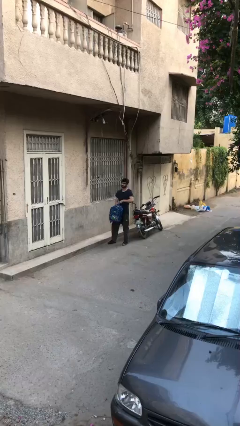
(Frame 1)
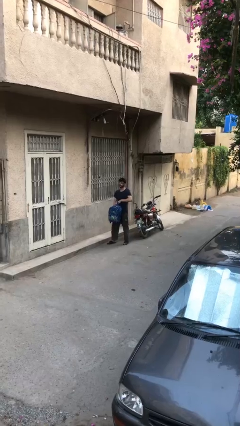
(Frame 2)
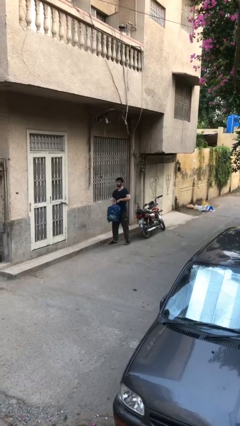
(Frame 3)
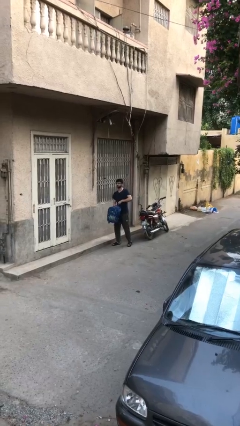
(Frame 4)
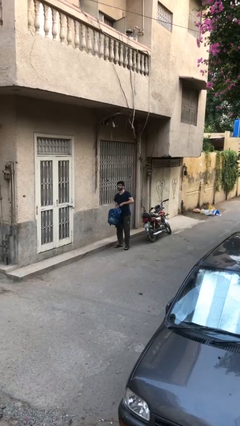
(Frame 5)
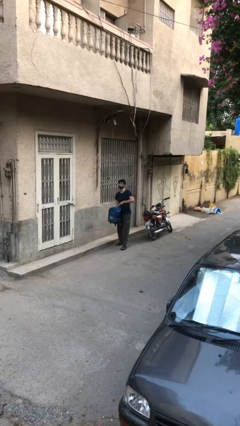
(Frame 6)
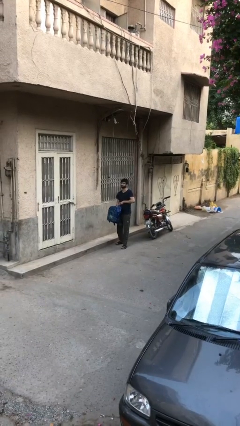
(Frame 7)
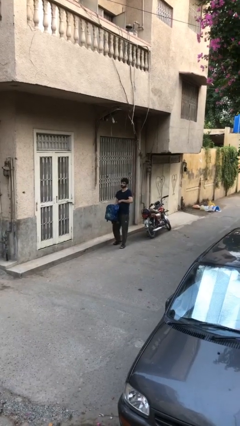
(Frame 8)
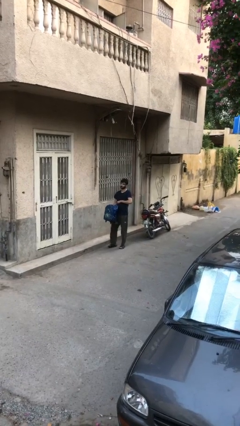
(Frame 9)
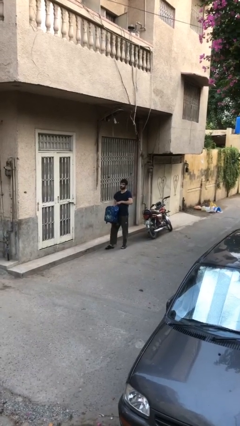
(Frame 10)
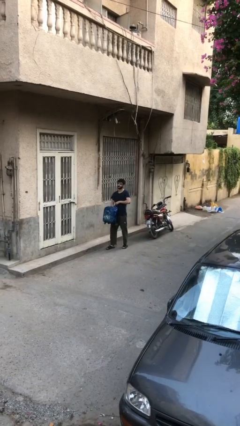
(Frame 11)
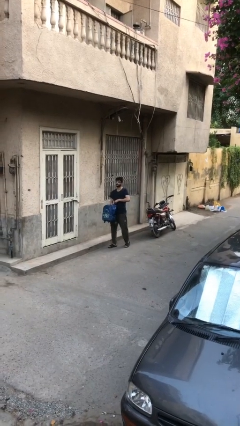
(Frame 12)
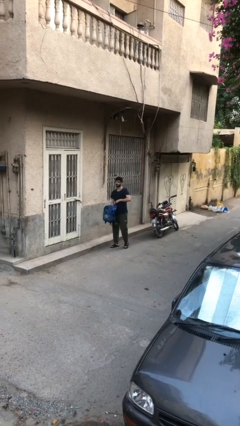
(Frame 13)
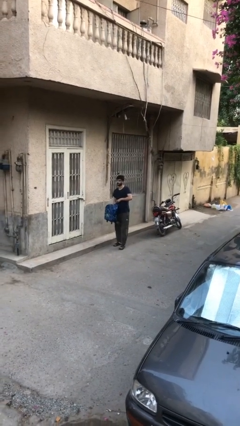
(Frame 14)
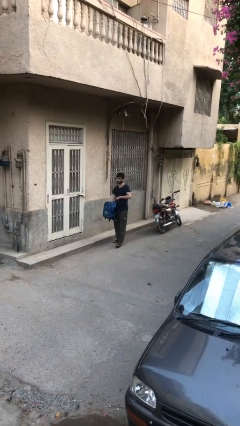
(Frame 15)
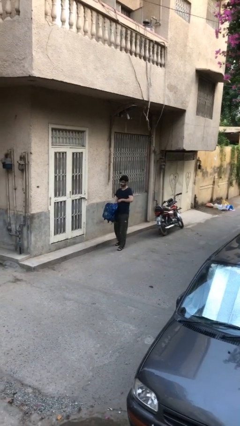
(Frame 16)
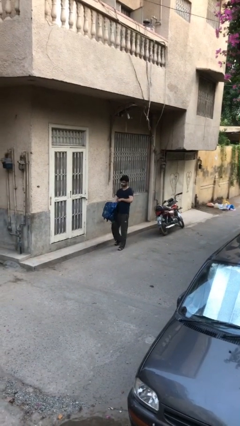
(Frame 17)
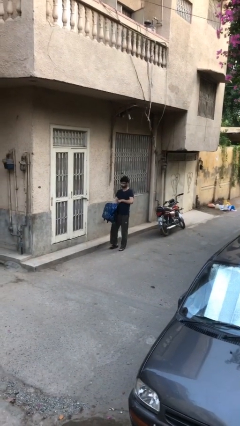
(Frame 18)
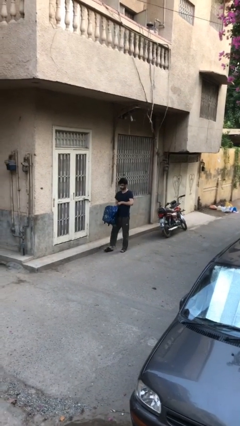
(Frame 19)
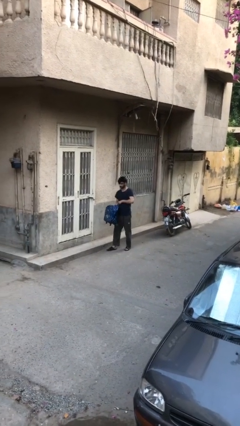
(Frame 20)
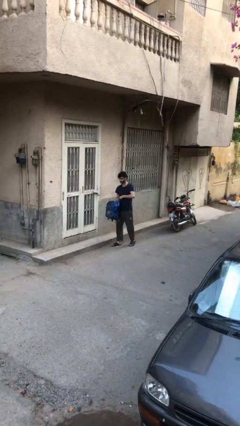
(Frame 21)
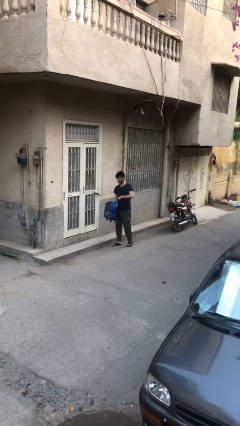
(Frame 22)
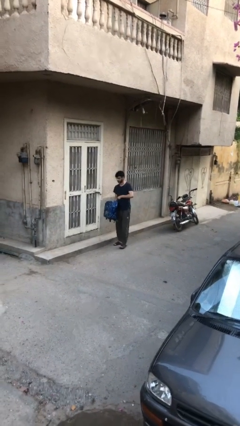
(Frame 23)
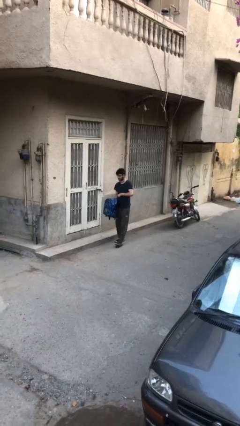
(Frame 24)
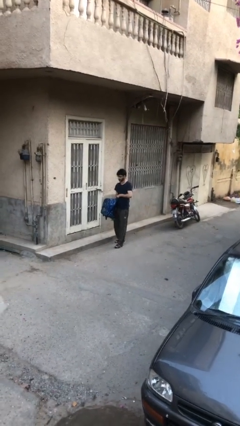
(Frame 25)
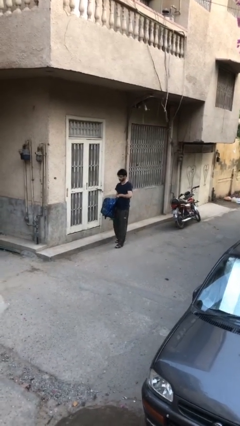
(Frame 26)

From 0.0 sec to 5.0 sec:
person carries heavy object

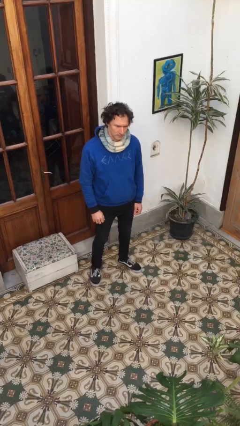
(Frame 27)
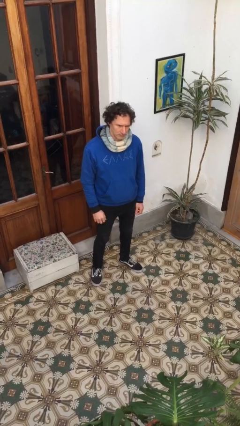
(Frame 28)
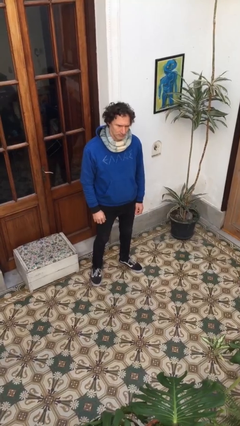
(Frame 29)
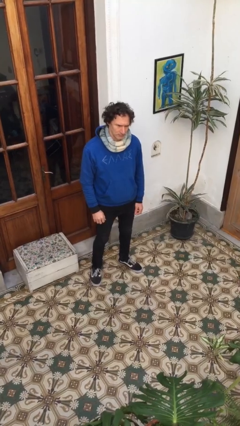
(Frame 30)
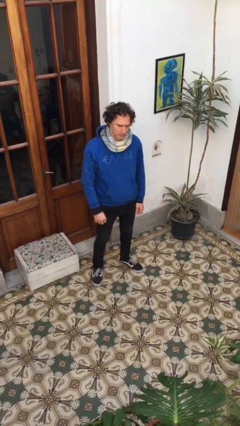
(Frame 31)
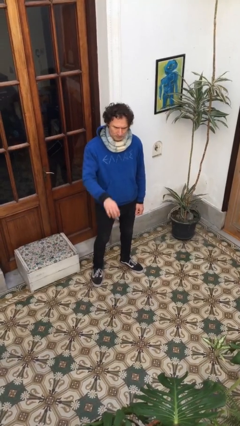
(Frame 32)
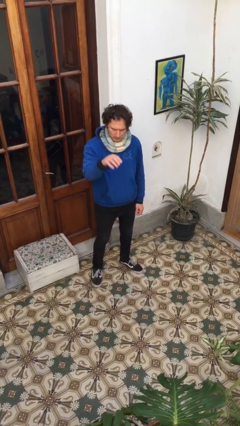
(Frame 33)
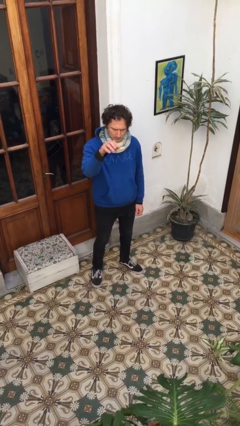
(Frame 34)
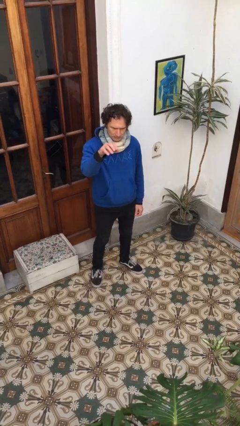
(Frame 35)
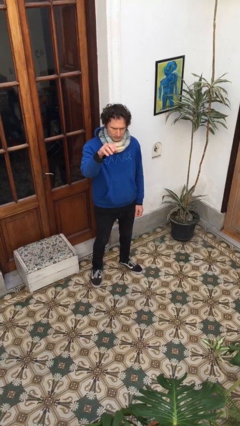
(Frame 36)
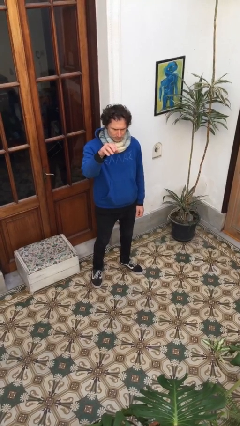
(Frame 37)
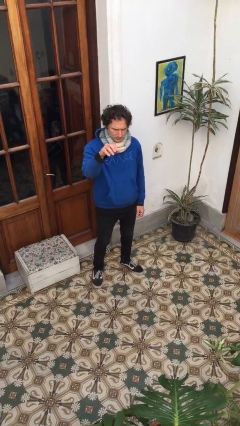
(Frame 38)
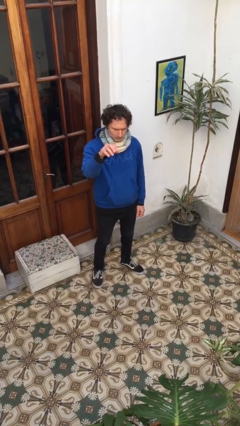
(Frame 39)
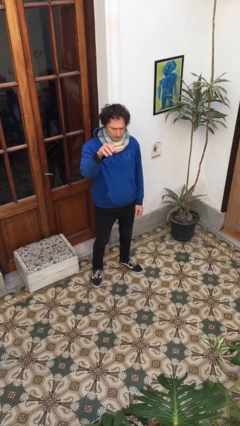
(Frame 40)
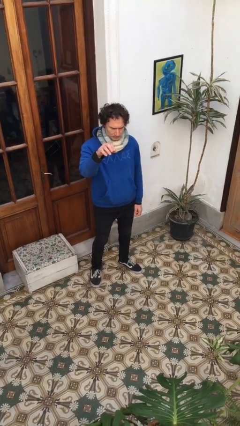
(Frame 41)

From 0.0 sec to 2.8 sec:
person gestures swipe up

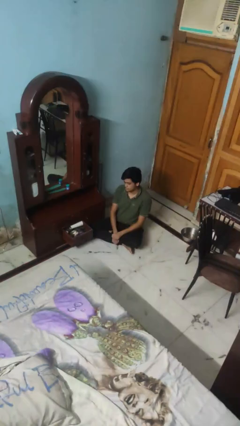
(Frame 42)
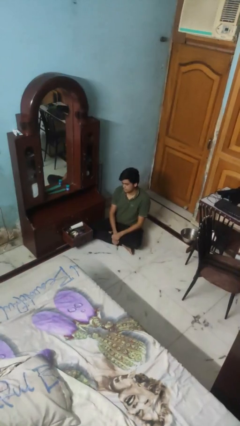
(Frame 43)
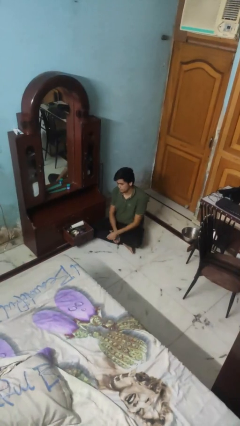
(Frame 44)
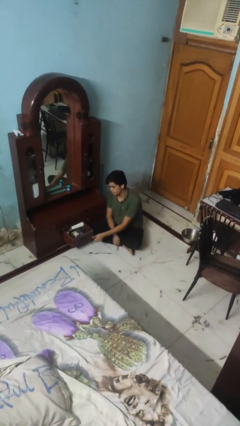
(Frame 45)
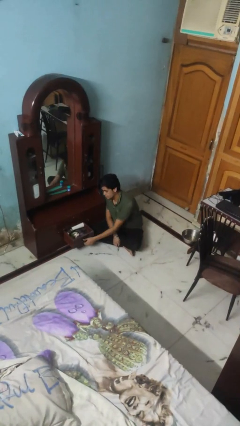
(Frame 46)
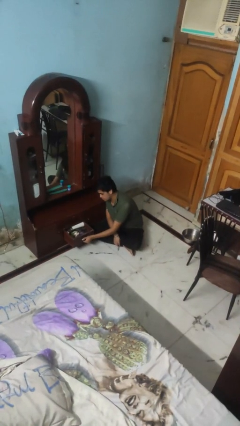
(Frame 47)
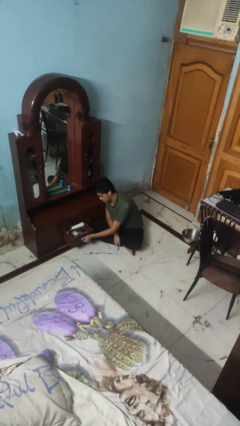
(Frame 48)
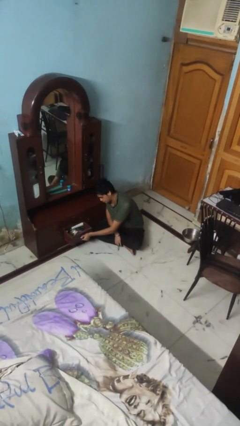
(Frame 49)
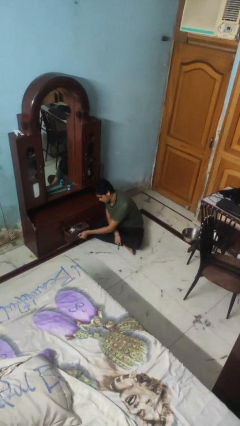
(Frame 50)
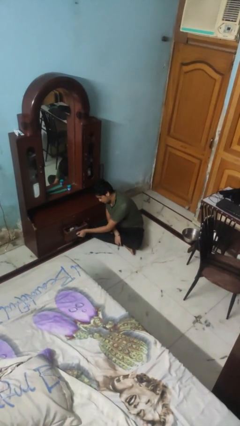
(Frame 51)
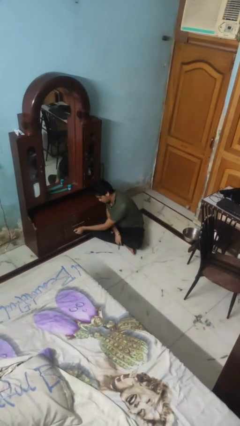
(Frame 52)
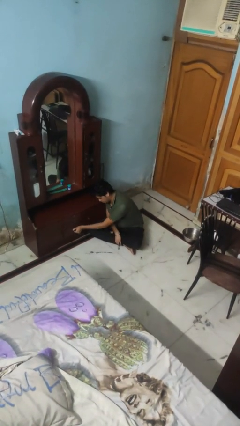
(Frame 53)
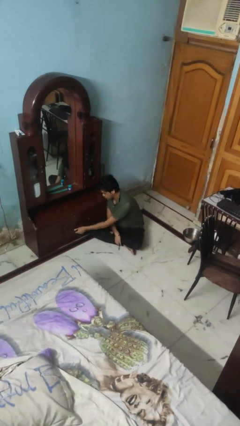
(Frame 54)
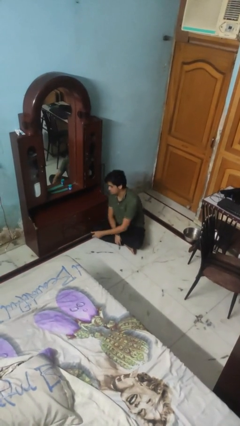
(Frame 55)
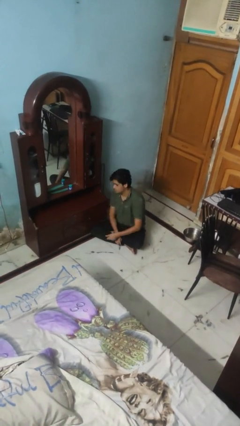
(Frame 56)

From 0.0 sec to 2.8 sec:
person closes dresser drawer

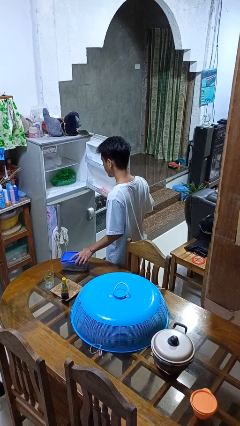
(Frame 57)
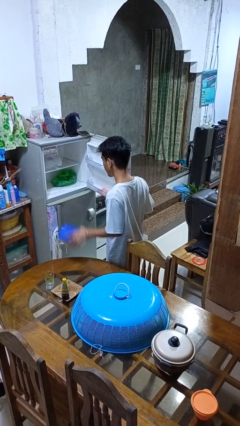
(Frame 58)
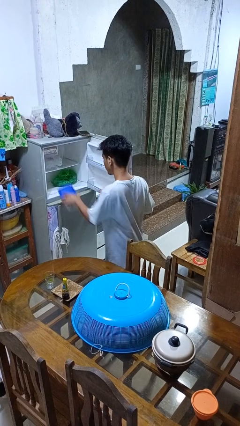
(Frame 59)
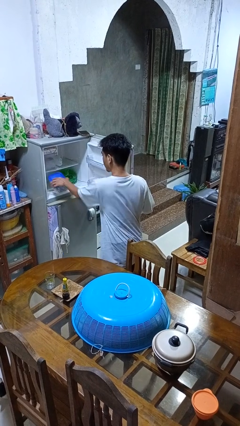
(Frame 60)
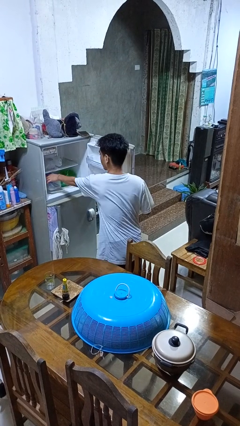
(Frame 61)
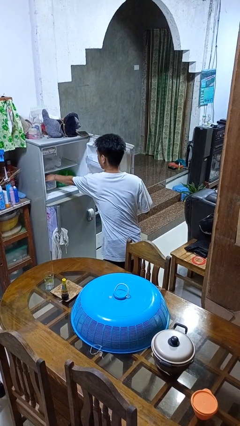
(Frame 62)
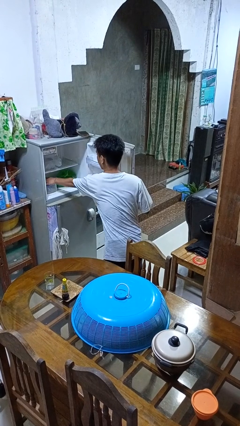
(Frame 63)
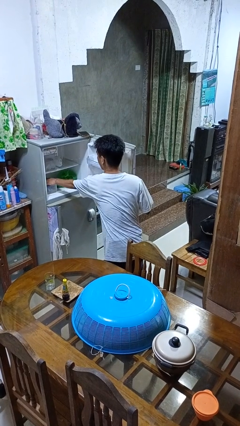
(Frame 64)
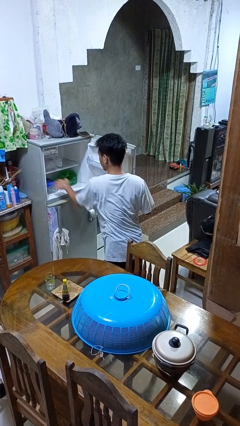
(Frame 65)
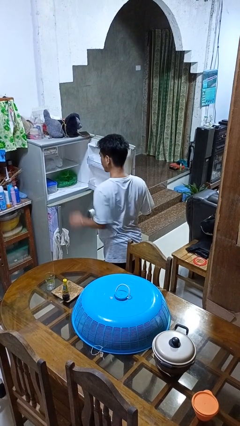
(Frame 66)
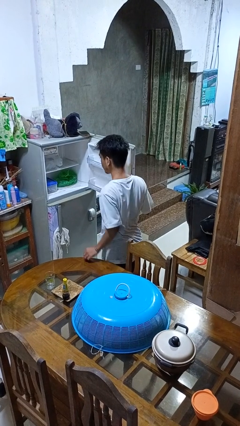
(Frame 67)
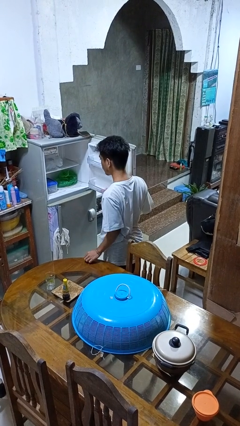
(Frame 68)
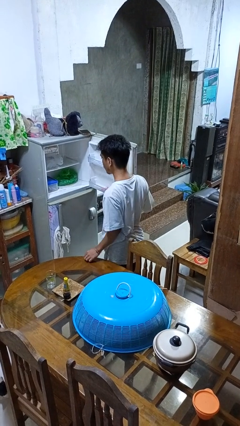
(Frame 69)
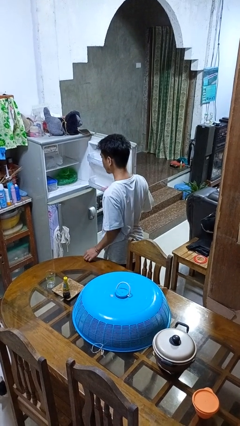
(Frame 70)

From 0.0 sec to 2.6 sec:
person puts object into refrigerator

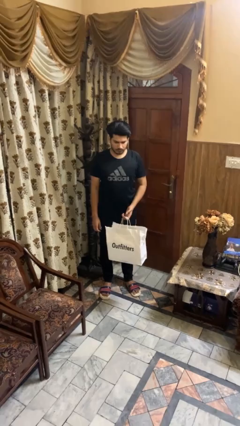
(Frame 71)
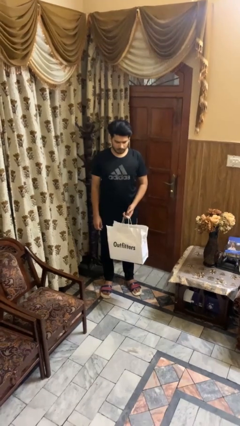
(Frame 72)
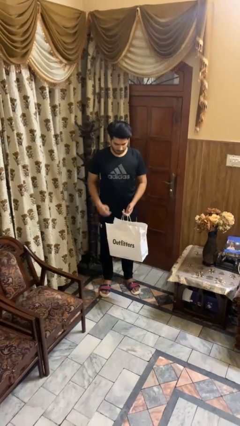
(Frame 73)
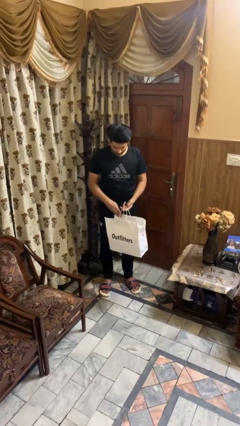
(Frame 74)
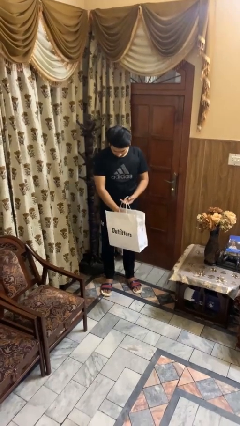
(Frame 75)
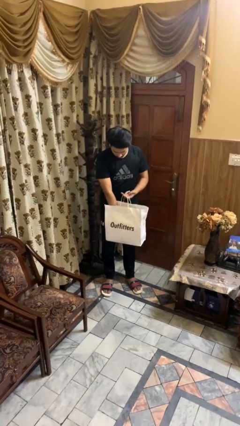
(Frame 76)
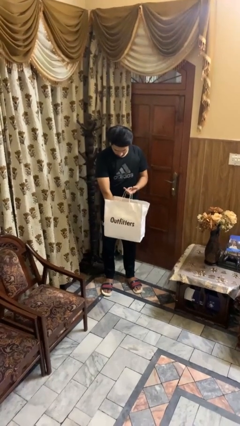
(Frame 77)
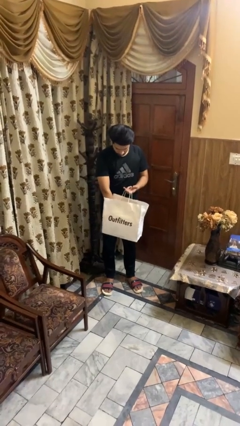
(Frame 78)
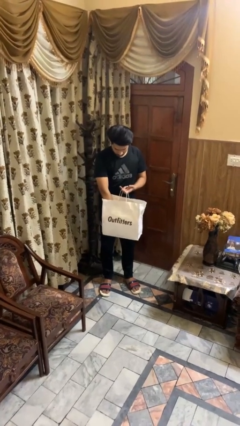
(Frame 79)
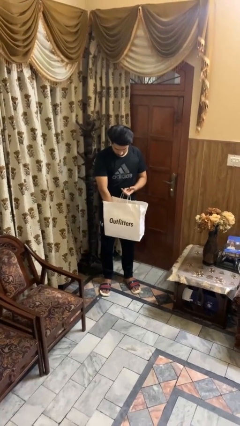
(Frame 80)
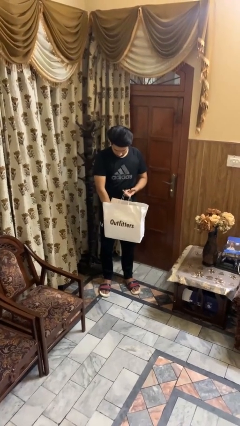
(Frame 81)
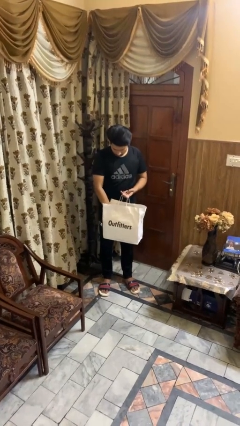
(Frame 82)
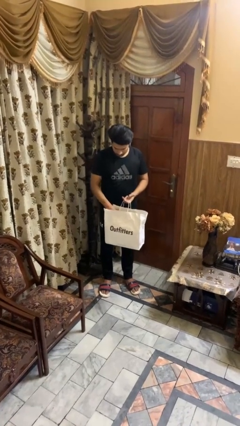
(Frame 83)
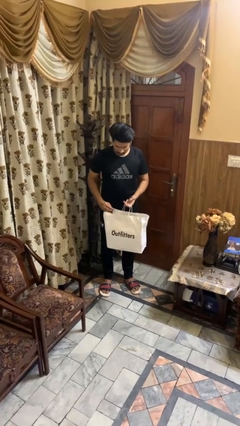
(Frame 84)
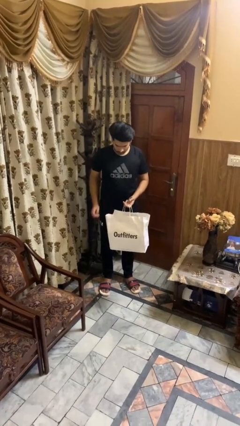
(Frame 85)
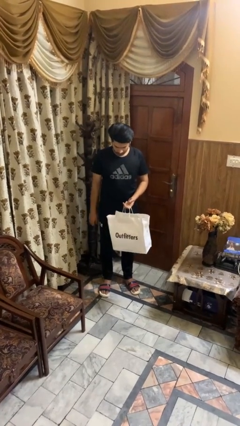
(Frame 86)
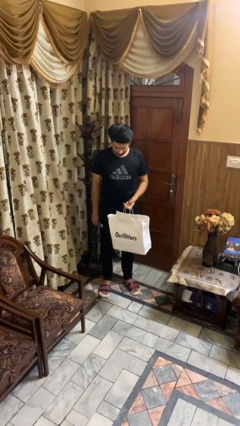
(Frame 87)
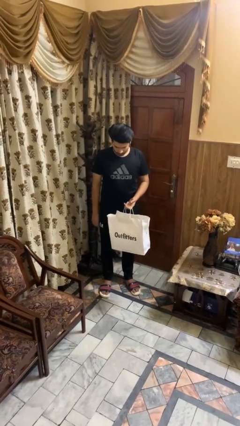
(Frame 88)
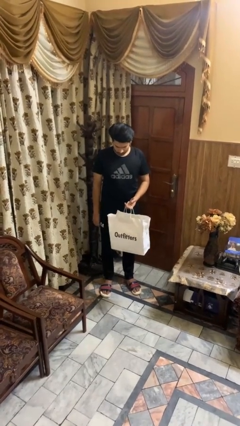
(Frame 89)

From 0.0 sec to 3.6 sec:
person searches in bag

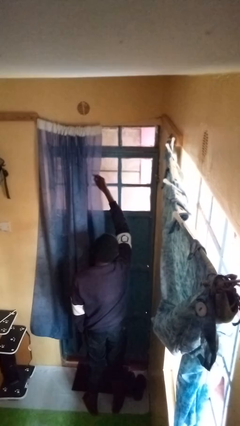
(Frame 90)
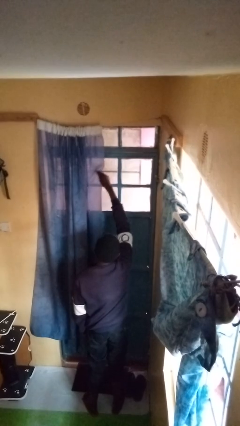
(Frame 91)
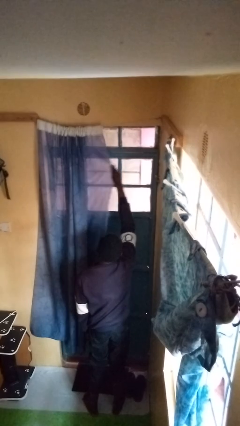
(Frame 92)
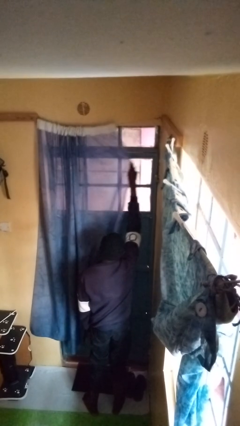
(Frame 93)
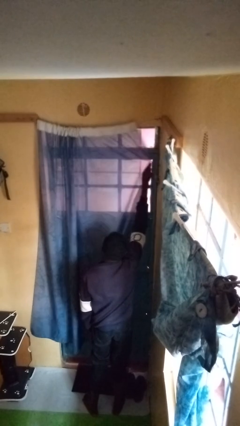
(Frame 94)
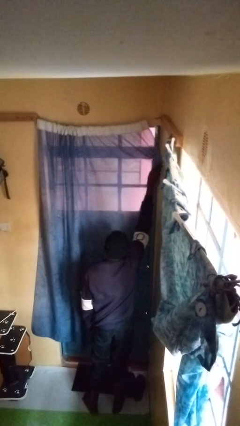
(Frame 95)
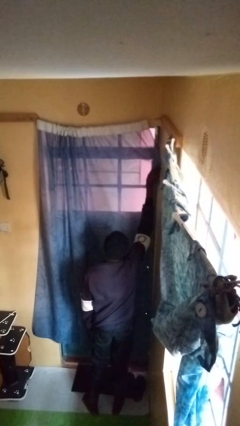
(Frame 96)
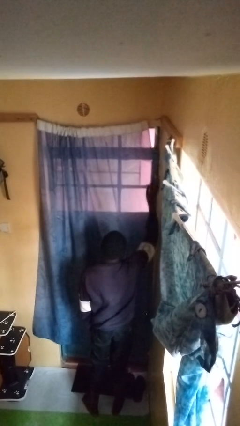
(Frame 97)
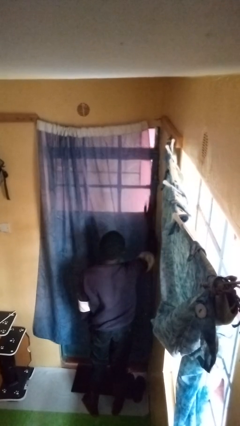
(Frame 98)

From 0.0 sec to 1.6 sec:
person closes curtains
